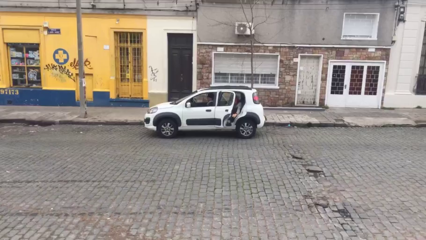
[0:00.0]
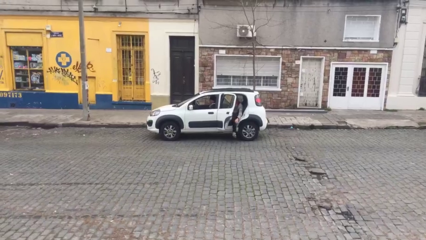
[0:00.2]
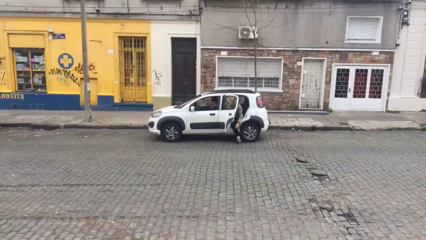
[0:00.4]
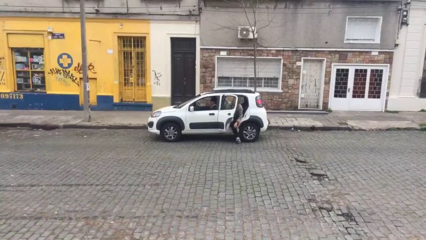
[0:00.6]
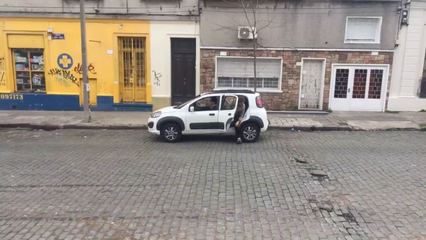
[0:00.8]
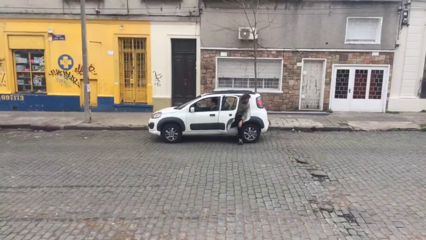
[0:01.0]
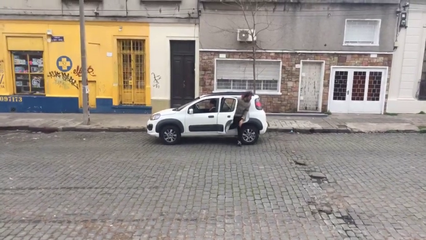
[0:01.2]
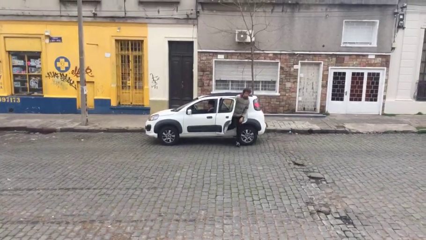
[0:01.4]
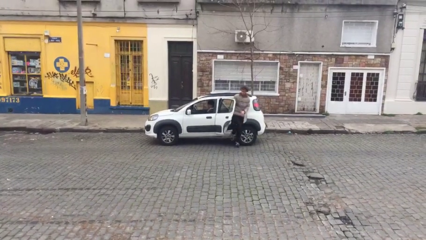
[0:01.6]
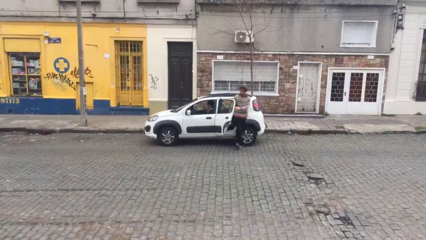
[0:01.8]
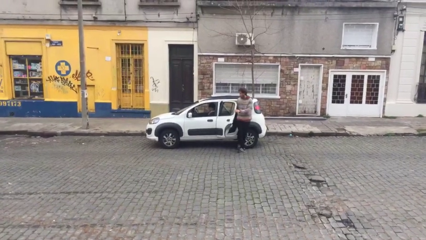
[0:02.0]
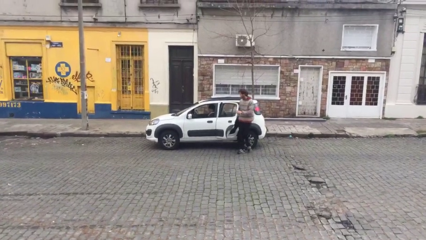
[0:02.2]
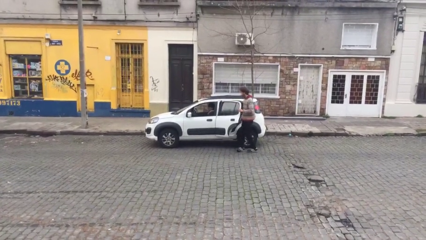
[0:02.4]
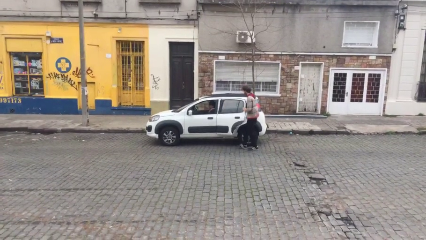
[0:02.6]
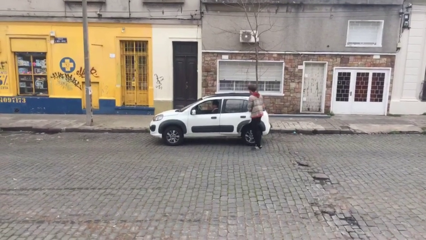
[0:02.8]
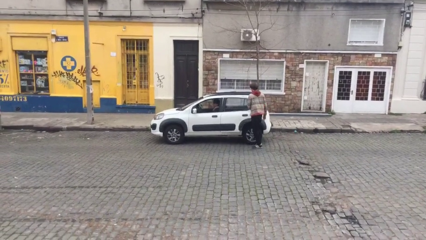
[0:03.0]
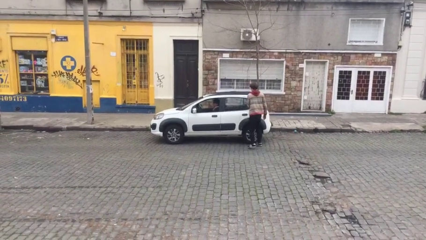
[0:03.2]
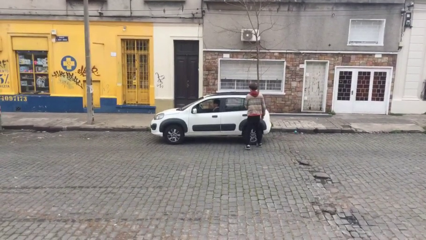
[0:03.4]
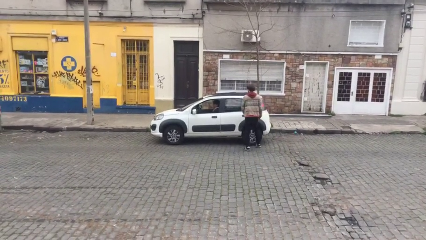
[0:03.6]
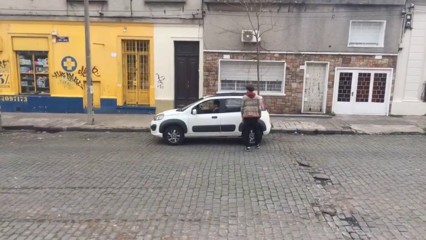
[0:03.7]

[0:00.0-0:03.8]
car drops off person

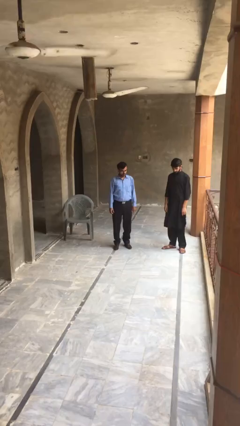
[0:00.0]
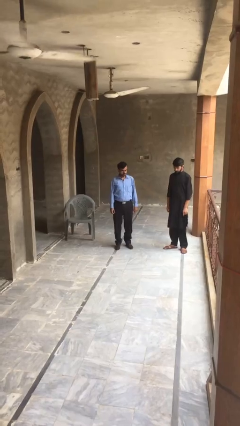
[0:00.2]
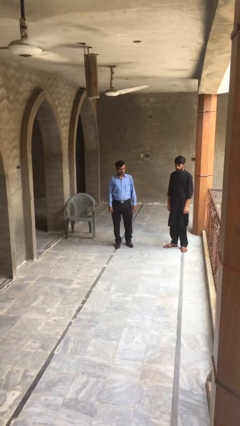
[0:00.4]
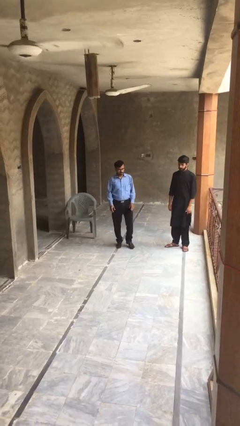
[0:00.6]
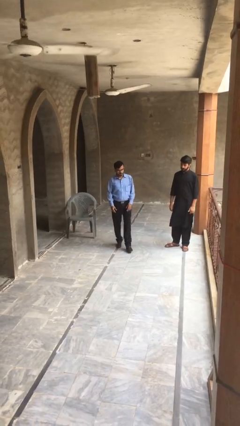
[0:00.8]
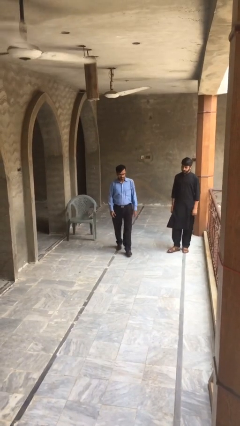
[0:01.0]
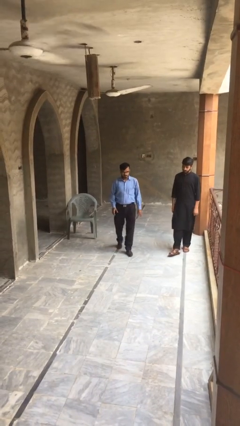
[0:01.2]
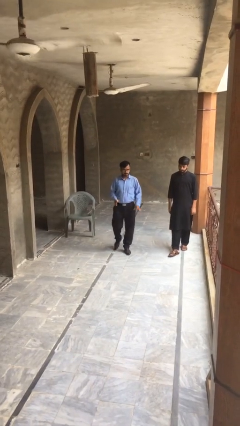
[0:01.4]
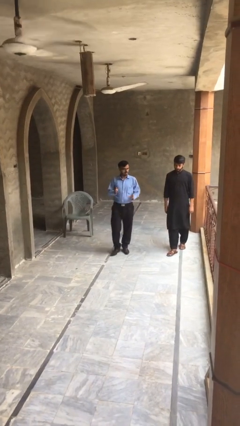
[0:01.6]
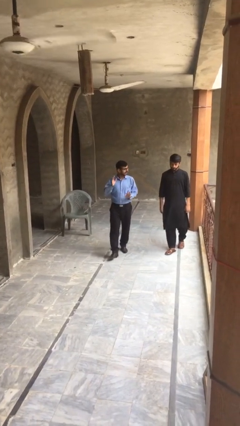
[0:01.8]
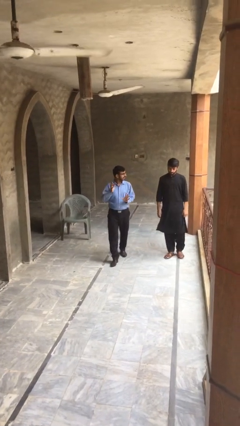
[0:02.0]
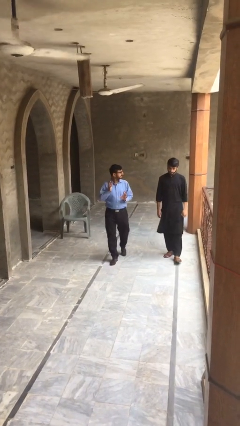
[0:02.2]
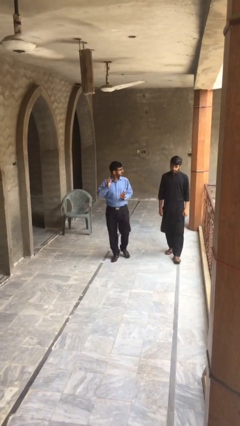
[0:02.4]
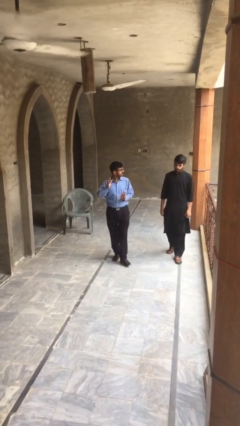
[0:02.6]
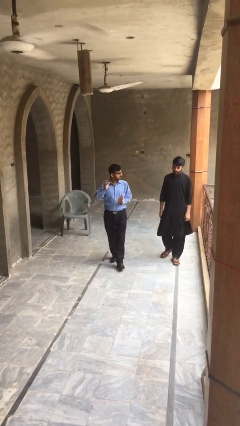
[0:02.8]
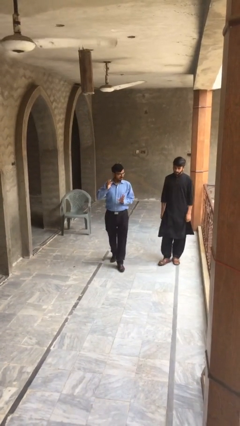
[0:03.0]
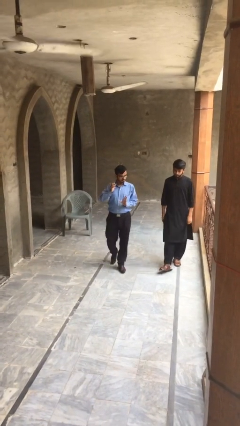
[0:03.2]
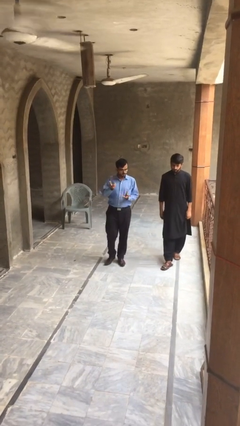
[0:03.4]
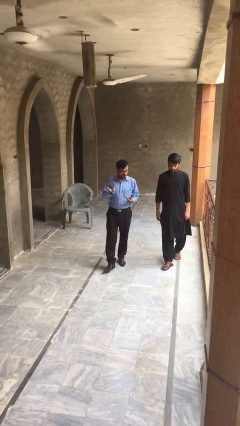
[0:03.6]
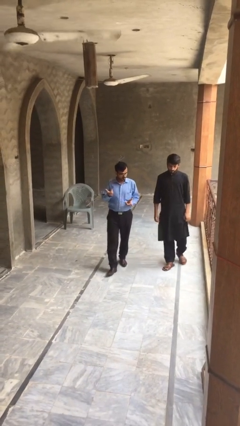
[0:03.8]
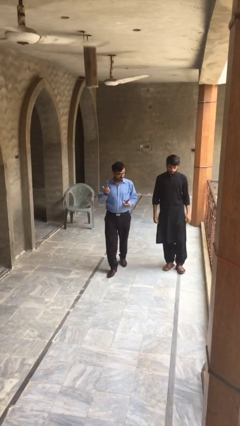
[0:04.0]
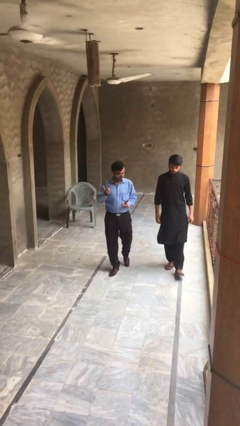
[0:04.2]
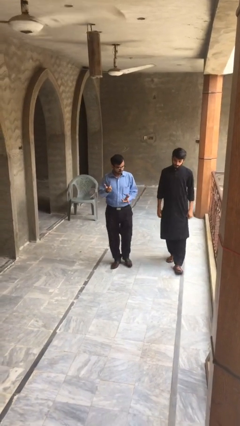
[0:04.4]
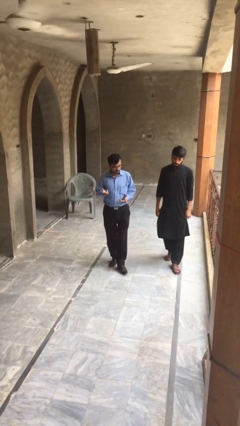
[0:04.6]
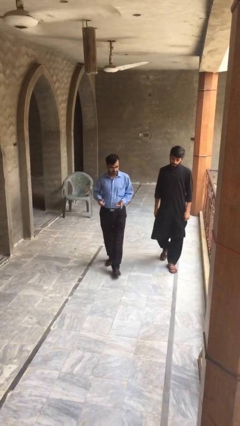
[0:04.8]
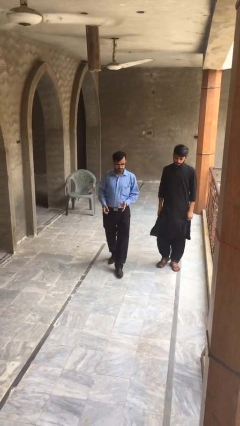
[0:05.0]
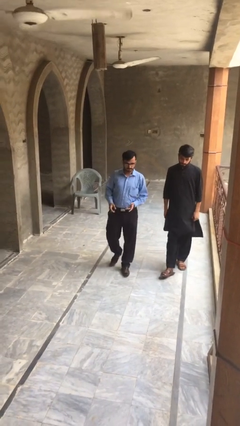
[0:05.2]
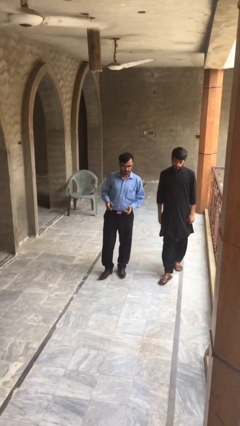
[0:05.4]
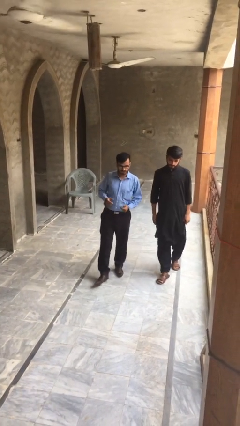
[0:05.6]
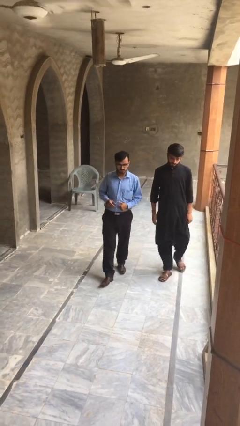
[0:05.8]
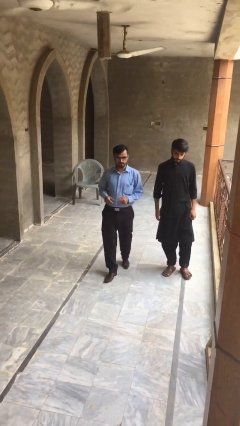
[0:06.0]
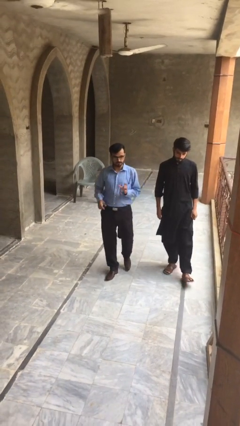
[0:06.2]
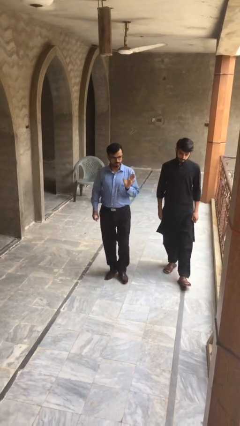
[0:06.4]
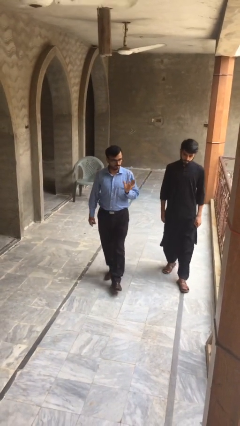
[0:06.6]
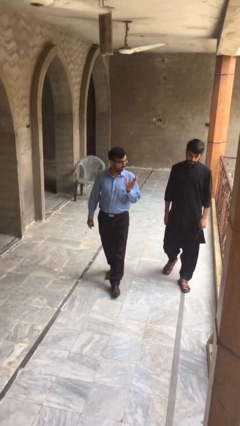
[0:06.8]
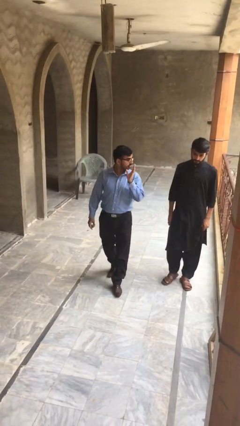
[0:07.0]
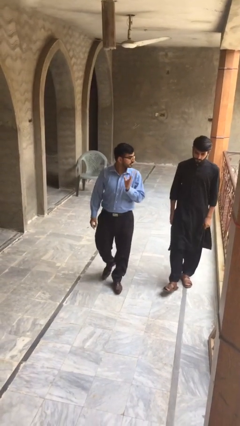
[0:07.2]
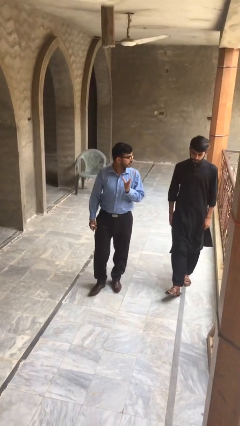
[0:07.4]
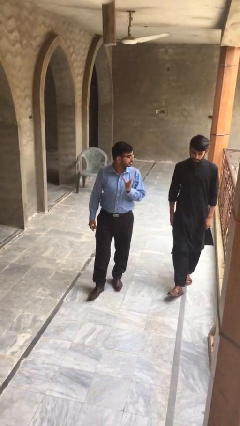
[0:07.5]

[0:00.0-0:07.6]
person talks to person

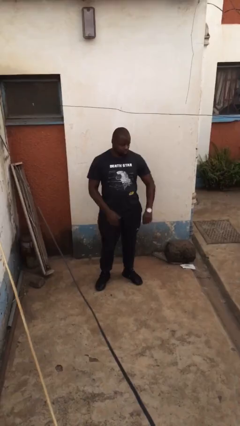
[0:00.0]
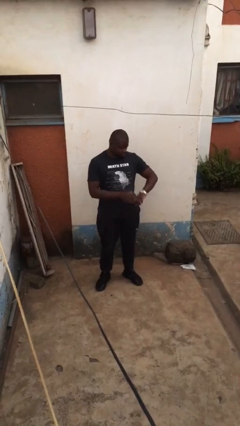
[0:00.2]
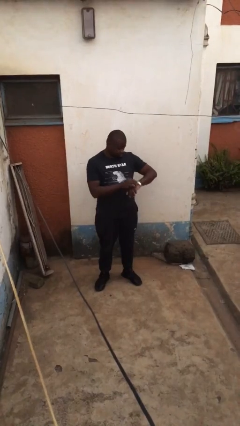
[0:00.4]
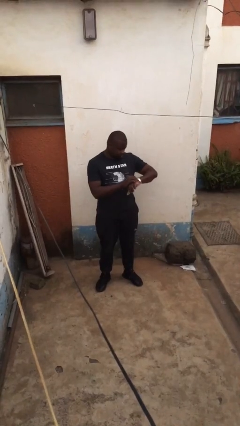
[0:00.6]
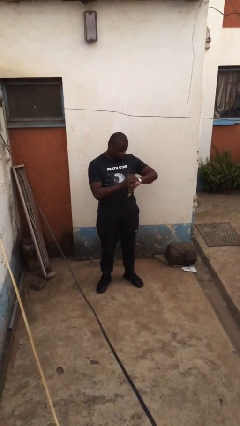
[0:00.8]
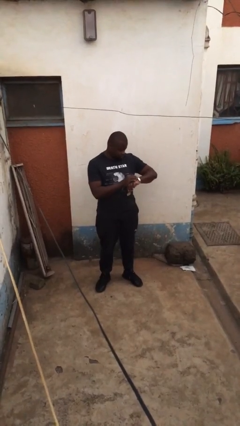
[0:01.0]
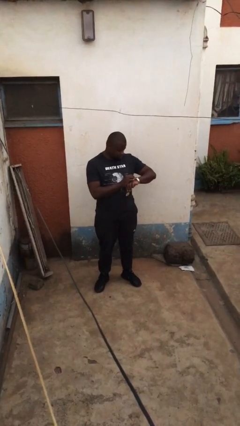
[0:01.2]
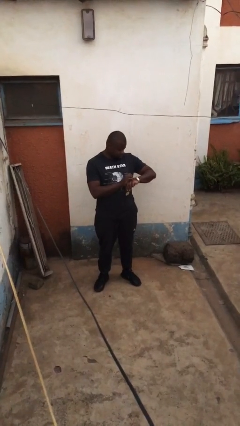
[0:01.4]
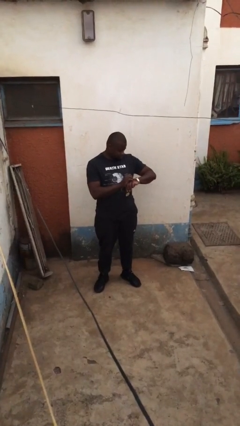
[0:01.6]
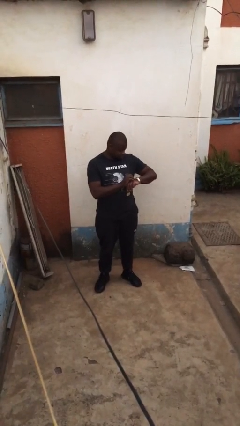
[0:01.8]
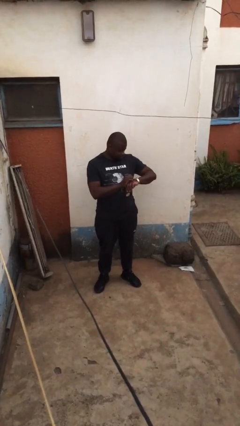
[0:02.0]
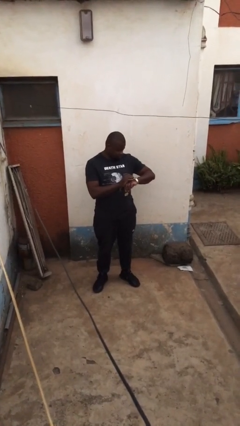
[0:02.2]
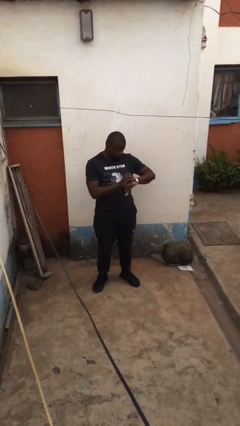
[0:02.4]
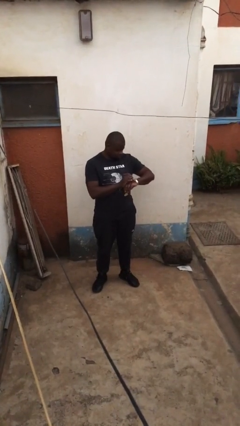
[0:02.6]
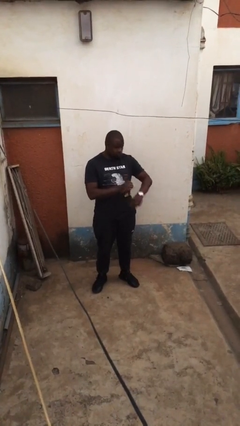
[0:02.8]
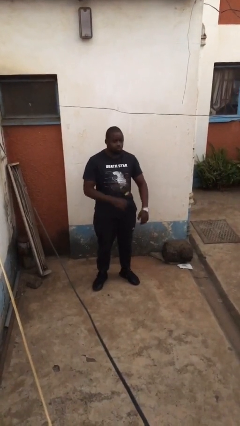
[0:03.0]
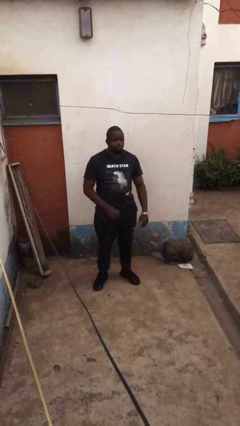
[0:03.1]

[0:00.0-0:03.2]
person looks at wristwatch

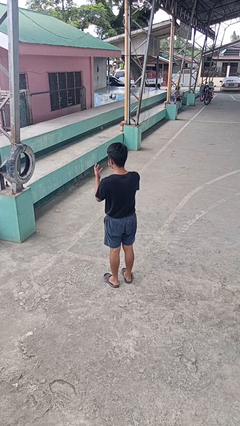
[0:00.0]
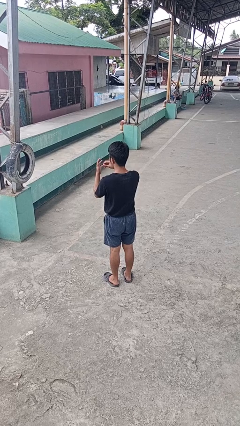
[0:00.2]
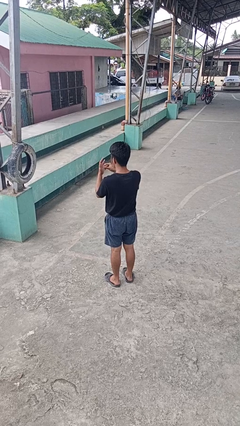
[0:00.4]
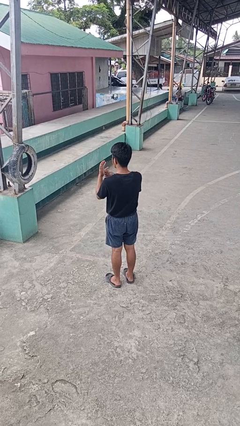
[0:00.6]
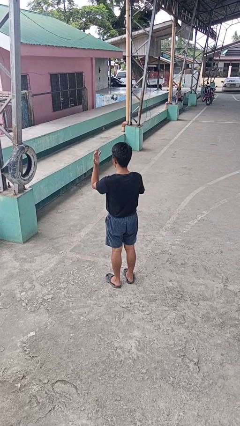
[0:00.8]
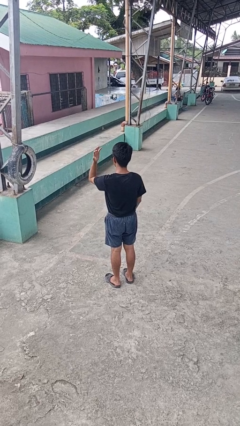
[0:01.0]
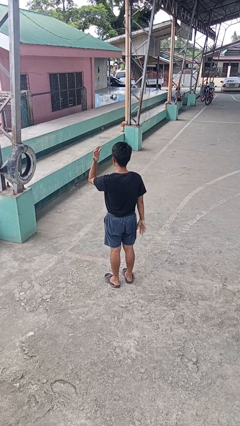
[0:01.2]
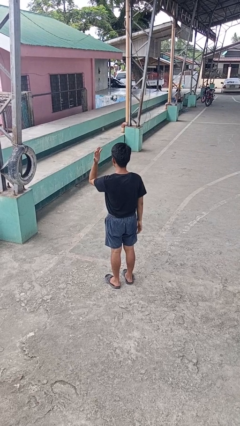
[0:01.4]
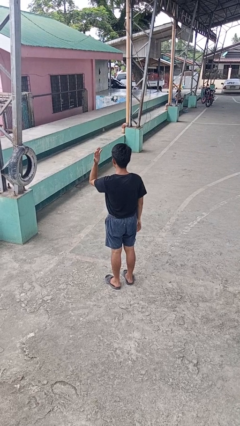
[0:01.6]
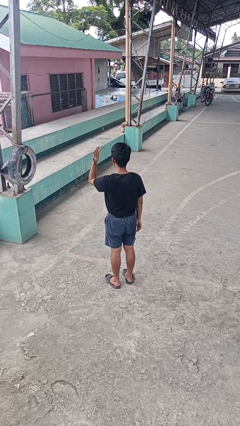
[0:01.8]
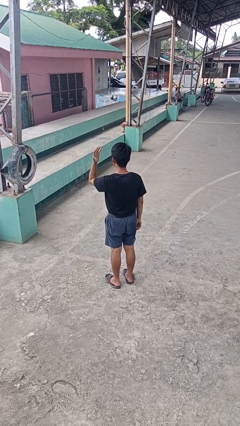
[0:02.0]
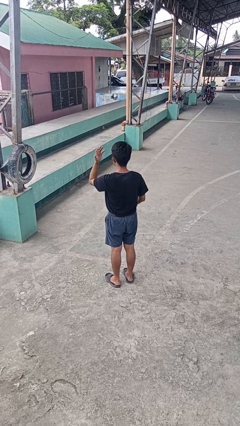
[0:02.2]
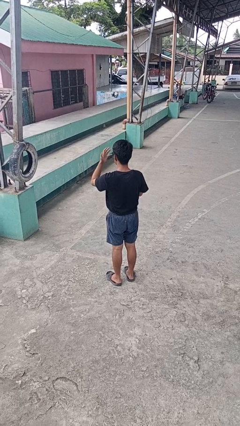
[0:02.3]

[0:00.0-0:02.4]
person puts on ring

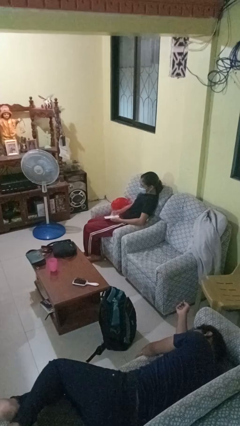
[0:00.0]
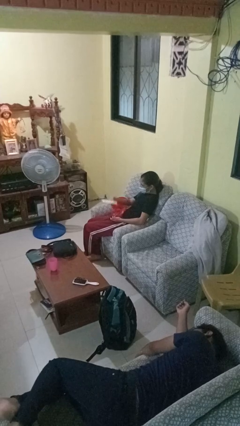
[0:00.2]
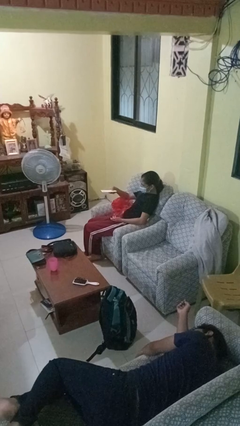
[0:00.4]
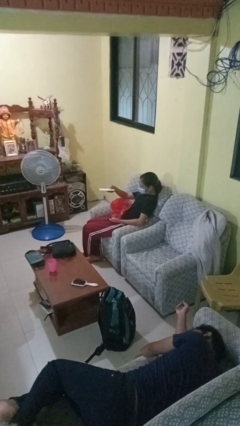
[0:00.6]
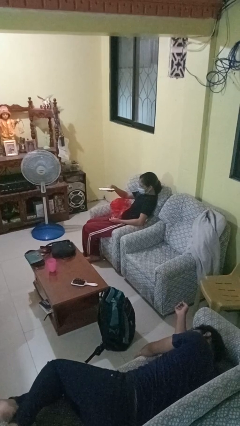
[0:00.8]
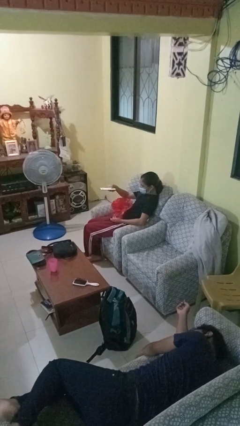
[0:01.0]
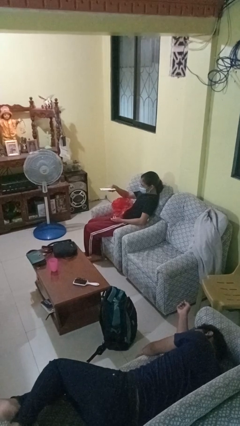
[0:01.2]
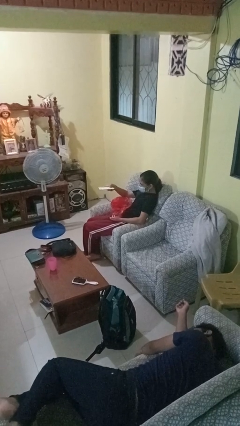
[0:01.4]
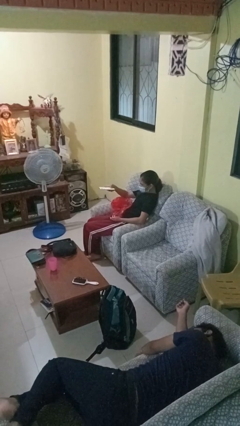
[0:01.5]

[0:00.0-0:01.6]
person uses television remote
